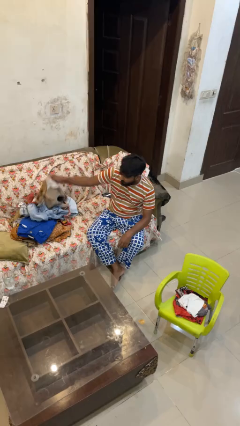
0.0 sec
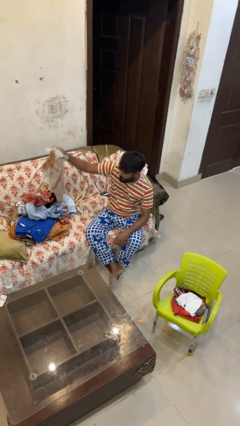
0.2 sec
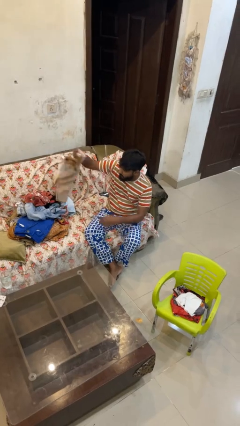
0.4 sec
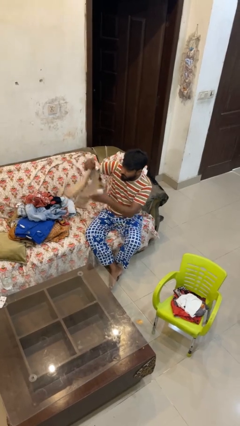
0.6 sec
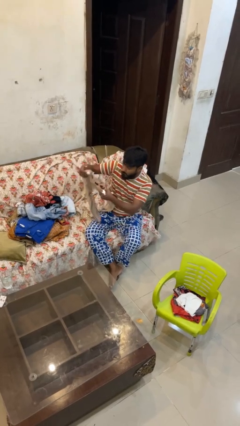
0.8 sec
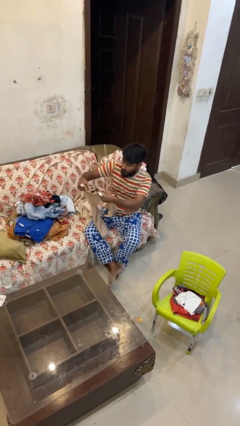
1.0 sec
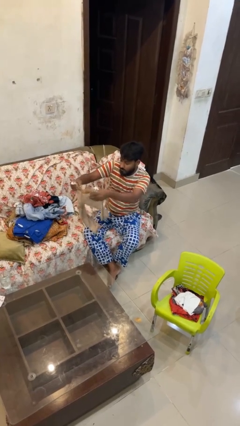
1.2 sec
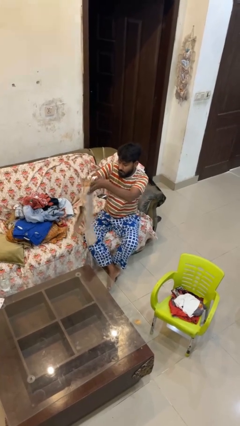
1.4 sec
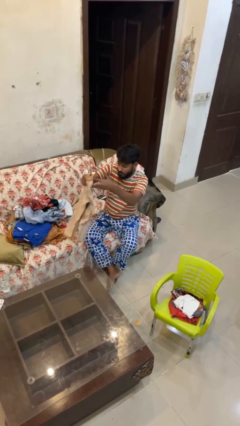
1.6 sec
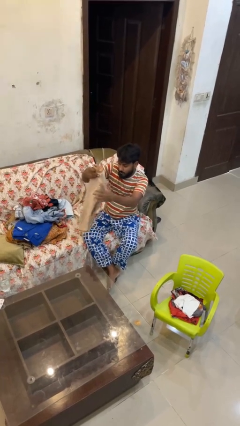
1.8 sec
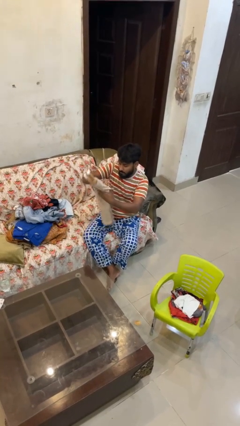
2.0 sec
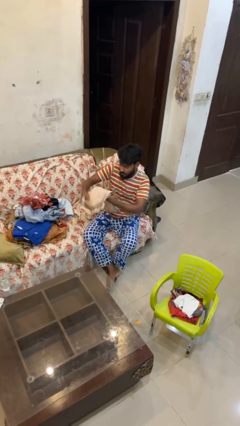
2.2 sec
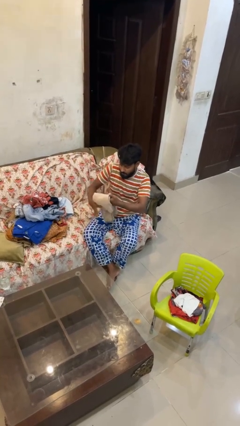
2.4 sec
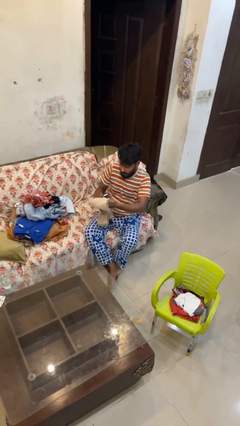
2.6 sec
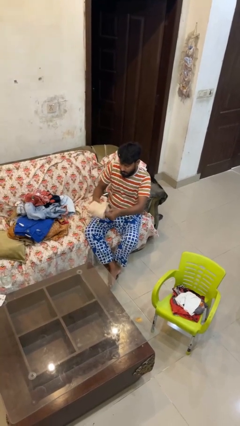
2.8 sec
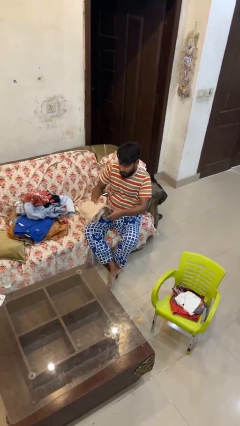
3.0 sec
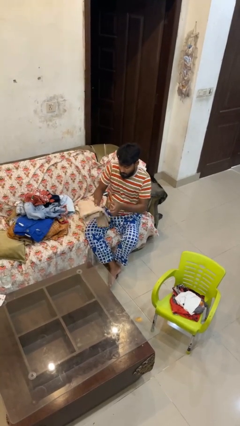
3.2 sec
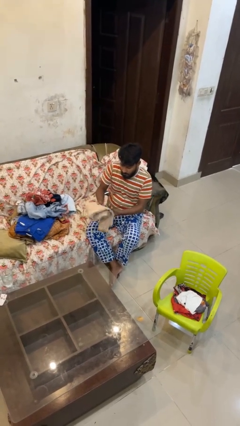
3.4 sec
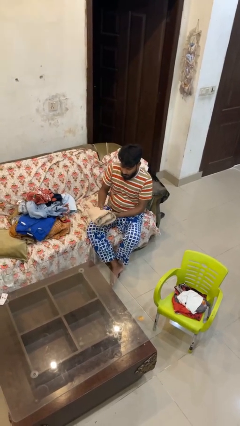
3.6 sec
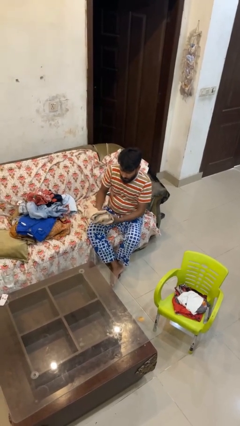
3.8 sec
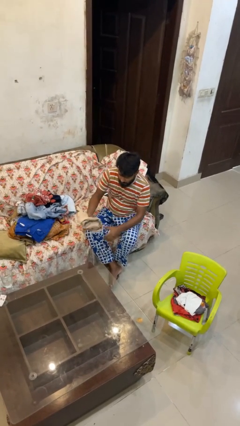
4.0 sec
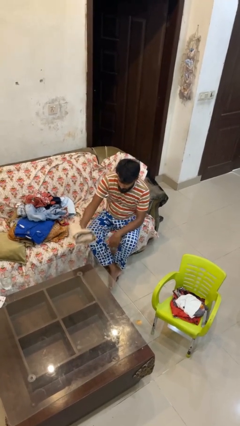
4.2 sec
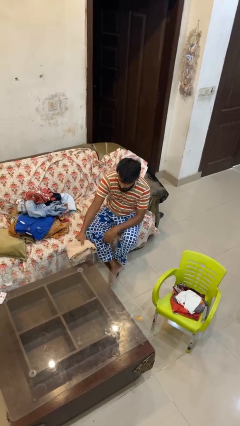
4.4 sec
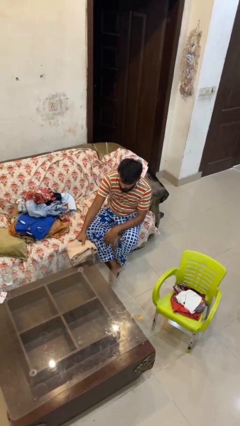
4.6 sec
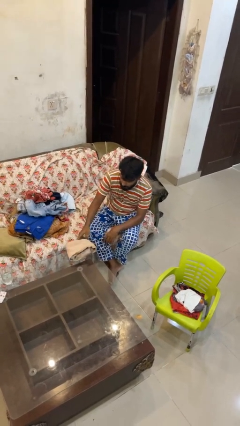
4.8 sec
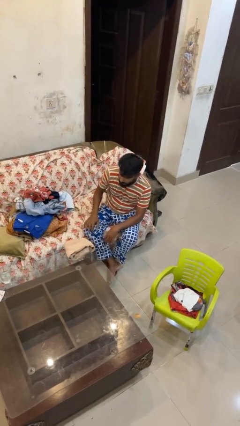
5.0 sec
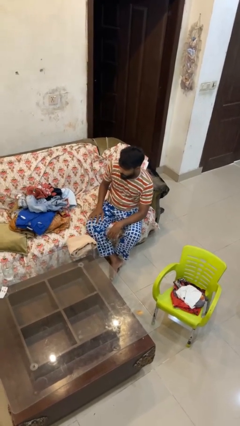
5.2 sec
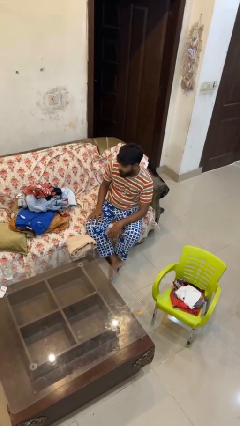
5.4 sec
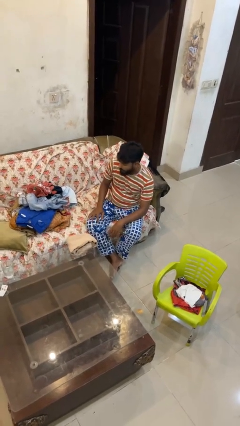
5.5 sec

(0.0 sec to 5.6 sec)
person folds pants

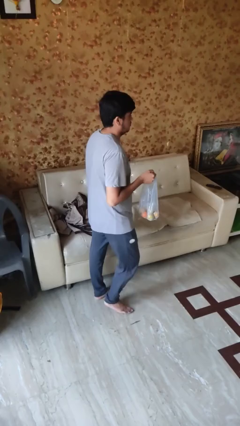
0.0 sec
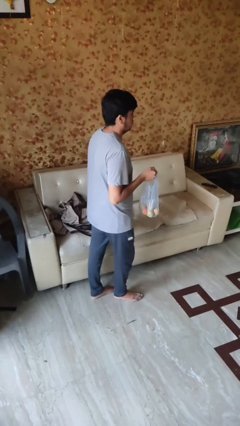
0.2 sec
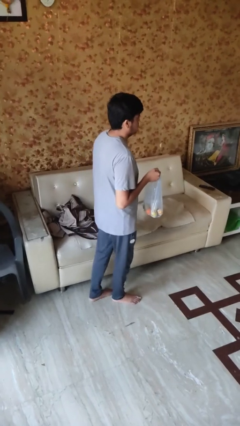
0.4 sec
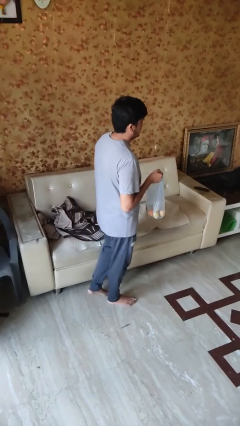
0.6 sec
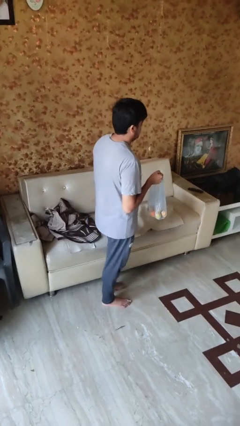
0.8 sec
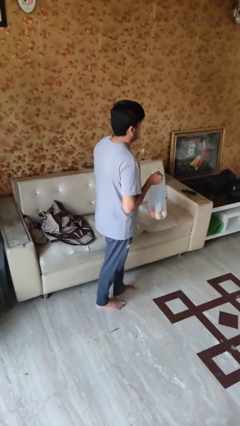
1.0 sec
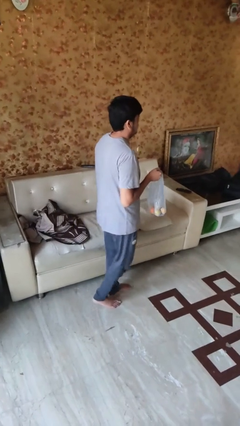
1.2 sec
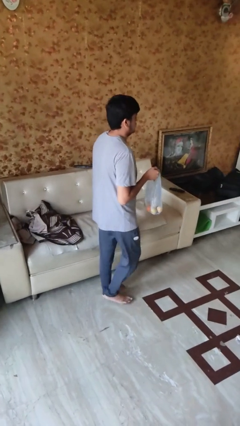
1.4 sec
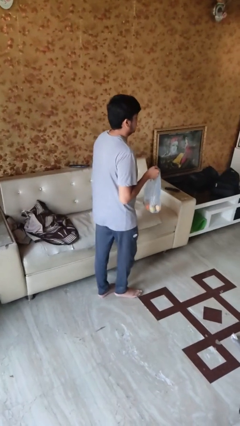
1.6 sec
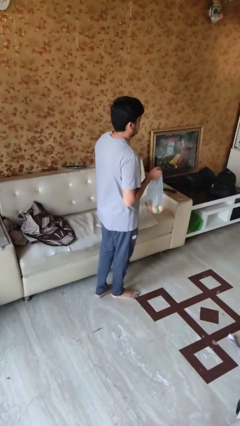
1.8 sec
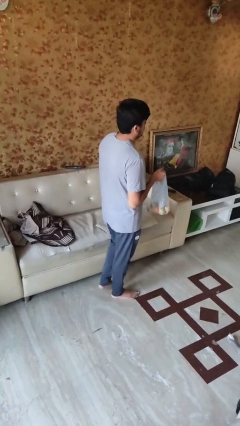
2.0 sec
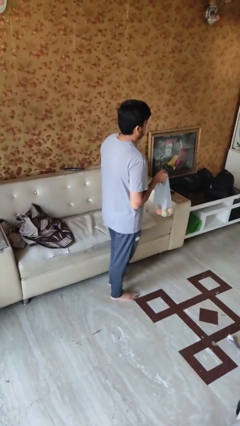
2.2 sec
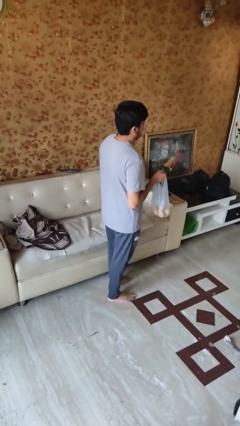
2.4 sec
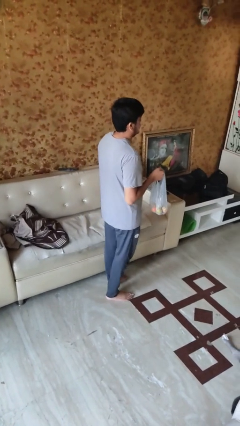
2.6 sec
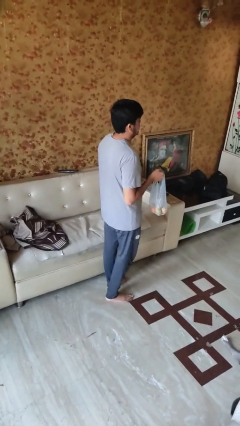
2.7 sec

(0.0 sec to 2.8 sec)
person carries groceries

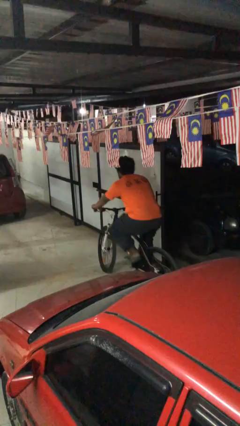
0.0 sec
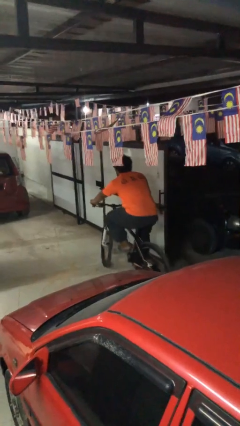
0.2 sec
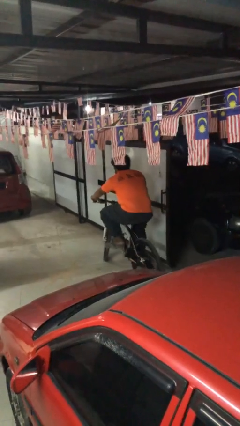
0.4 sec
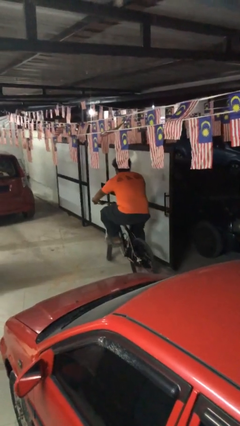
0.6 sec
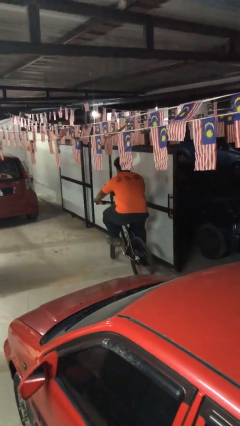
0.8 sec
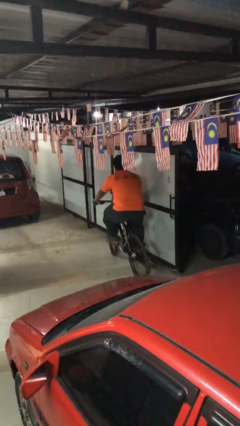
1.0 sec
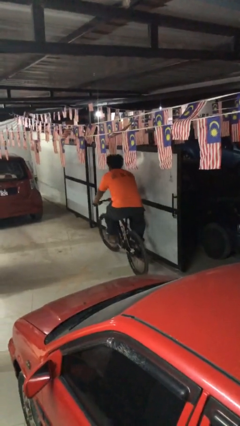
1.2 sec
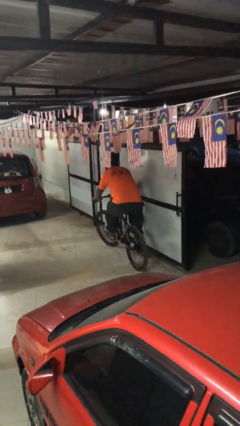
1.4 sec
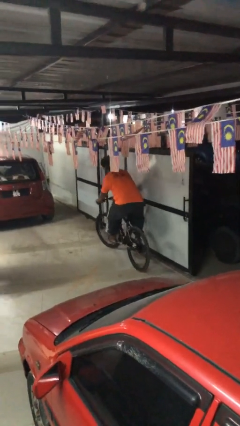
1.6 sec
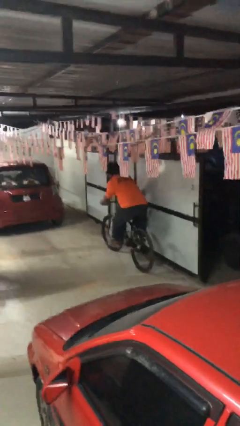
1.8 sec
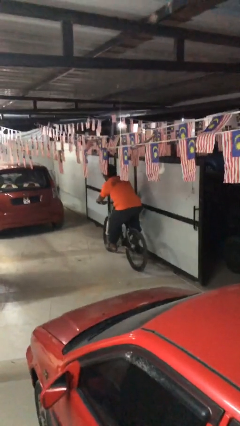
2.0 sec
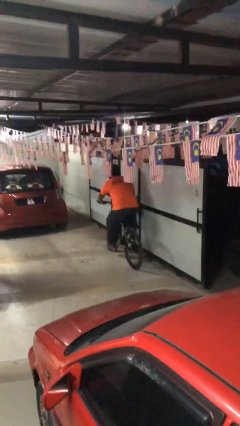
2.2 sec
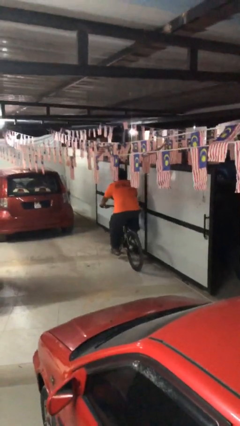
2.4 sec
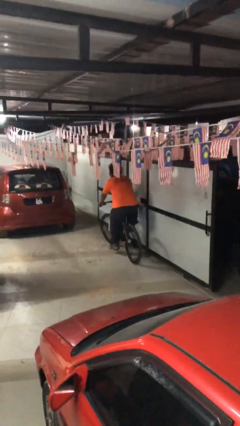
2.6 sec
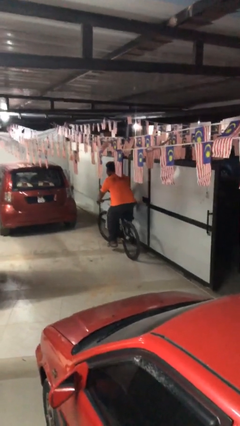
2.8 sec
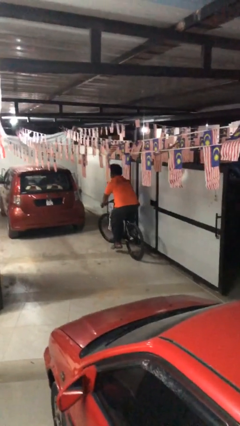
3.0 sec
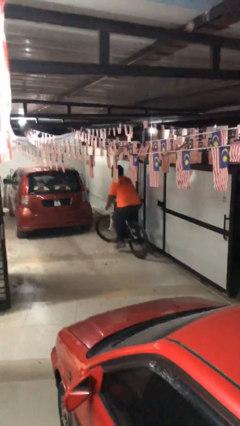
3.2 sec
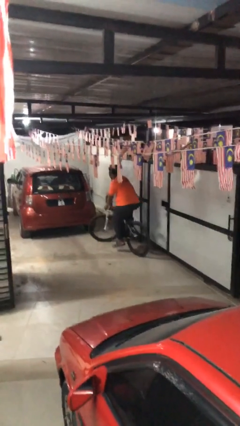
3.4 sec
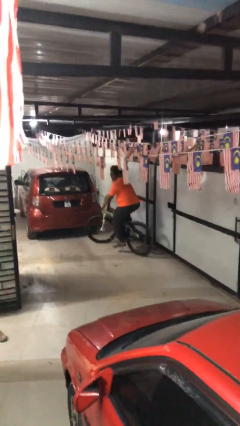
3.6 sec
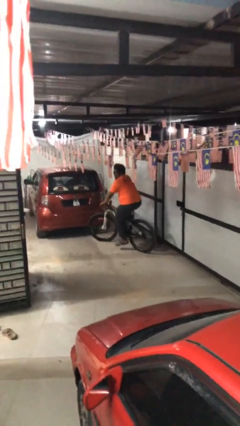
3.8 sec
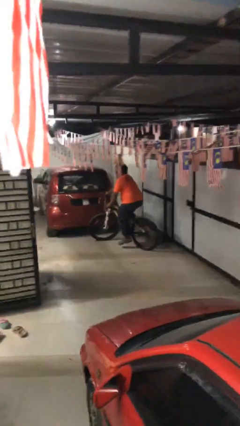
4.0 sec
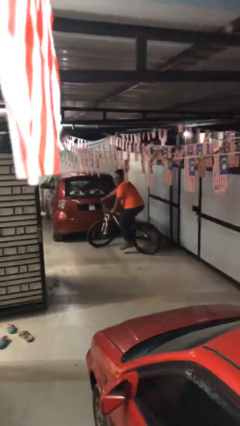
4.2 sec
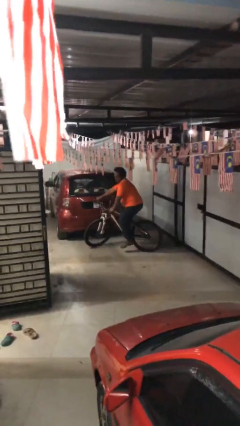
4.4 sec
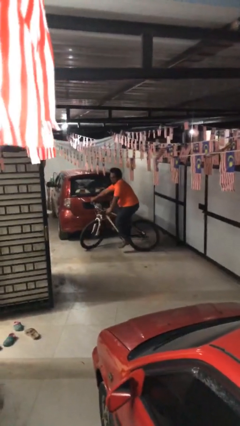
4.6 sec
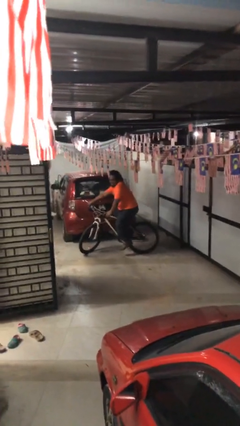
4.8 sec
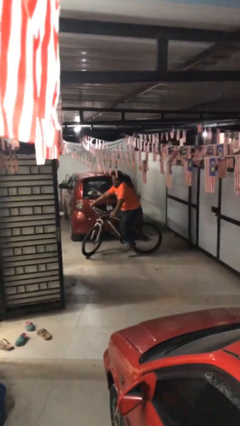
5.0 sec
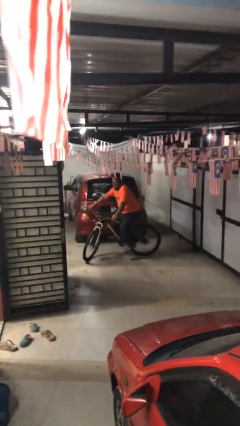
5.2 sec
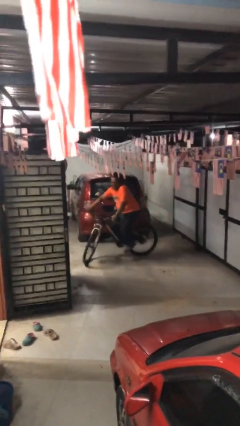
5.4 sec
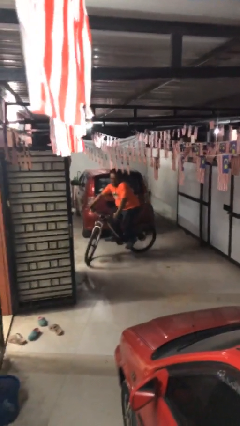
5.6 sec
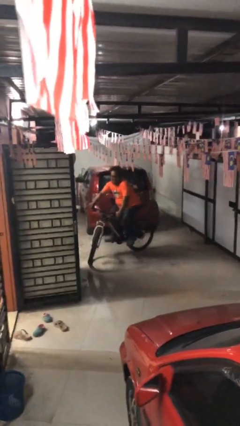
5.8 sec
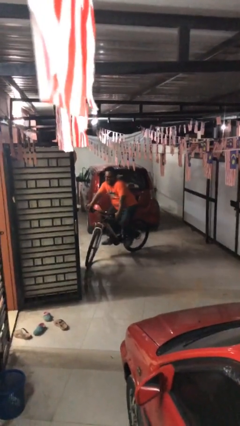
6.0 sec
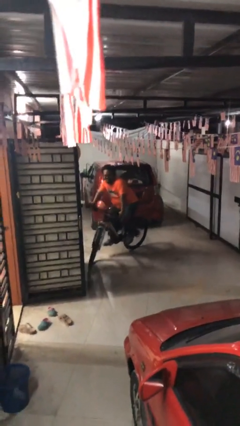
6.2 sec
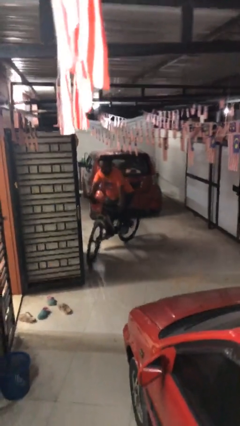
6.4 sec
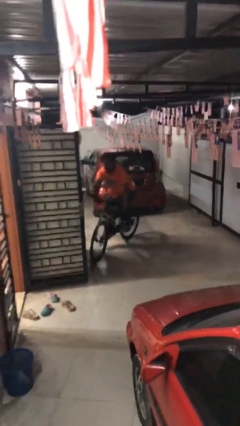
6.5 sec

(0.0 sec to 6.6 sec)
person rides bicycle

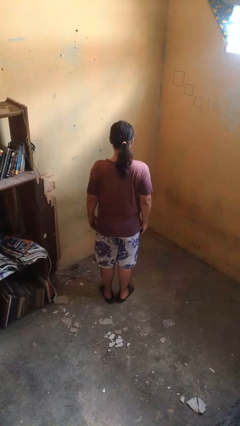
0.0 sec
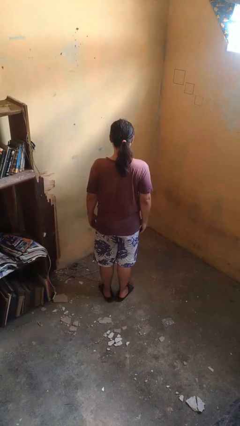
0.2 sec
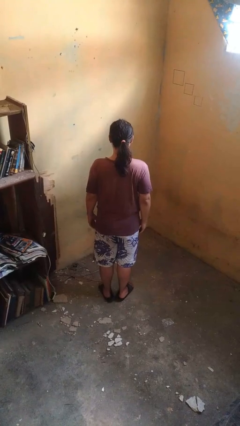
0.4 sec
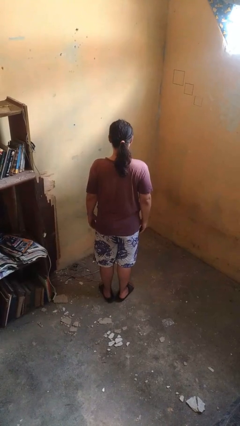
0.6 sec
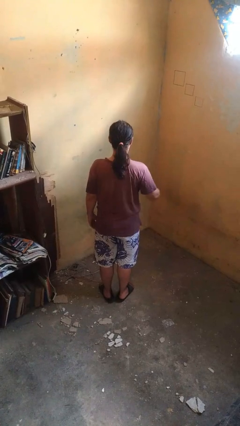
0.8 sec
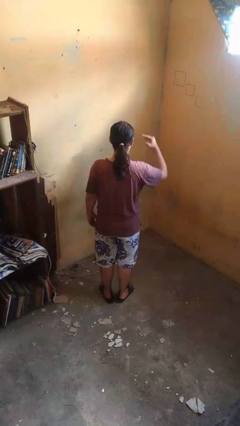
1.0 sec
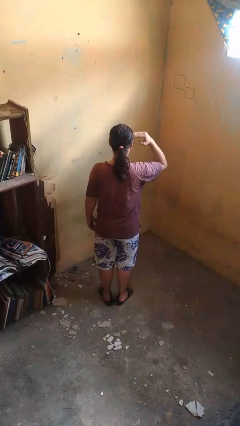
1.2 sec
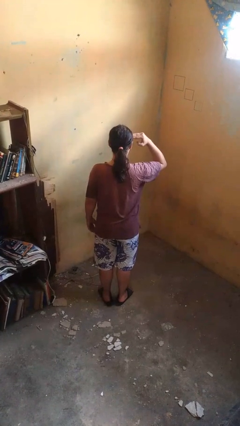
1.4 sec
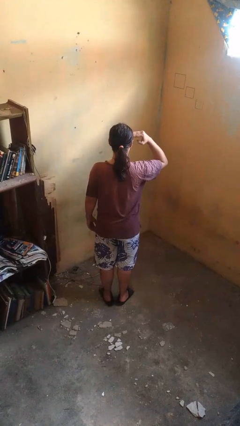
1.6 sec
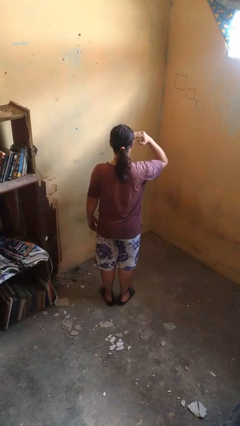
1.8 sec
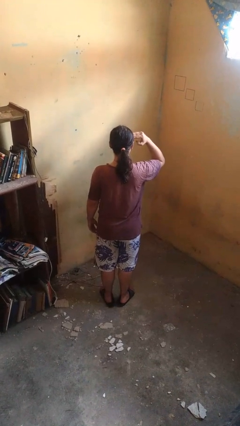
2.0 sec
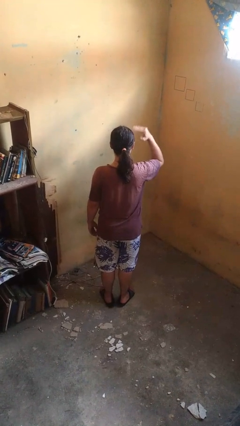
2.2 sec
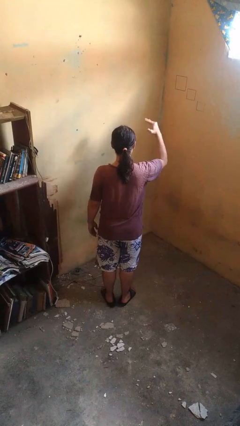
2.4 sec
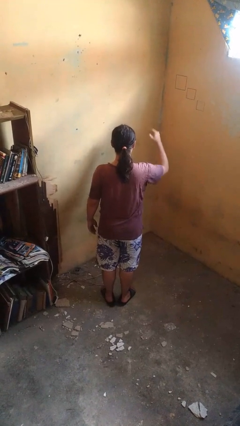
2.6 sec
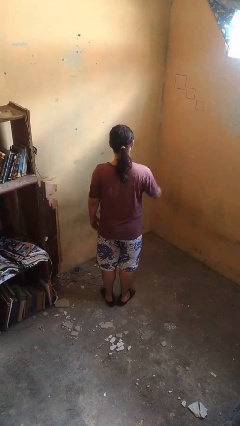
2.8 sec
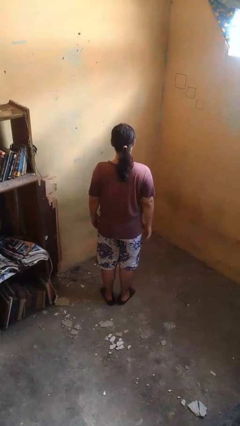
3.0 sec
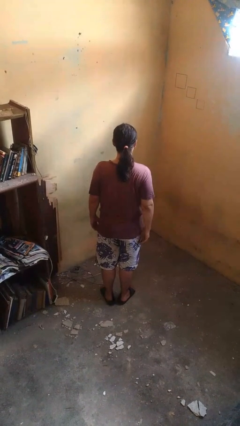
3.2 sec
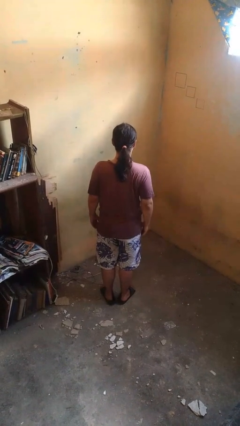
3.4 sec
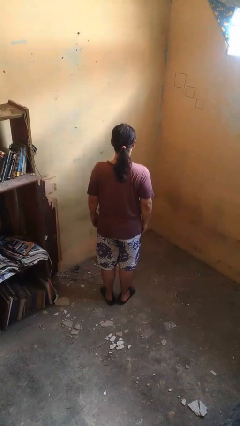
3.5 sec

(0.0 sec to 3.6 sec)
person salutes
